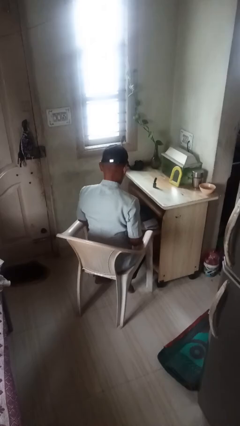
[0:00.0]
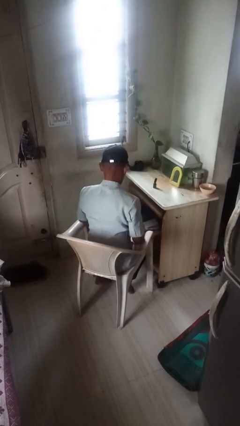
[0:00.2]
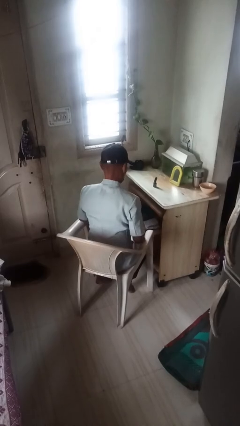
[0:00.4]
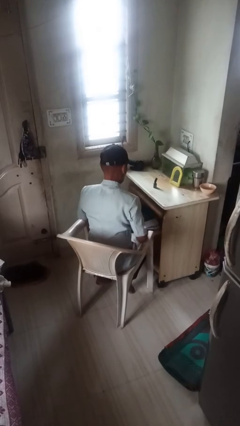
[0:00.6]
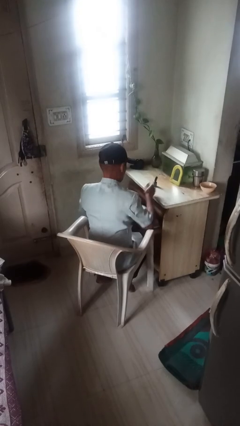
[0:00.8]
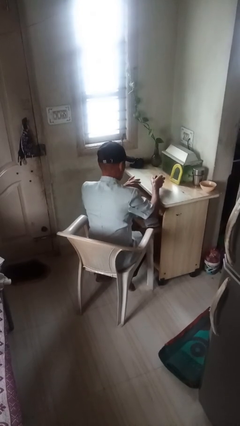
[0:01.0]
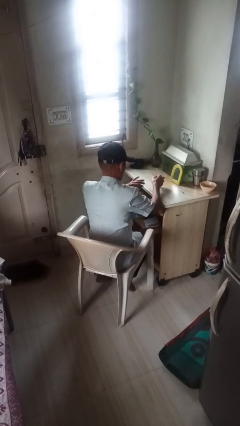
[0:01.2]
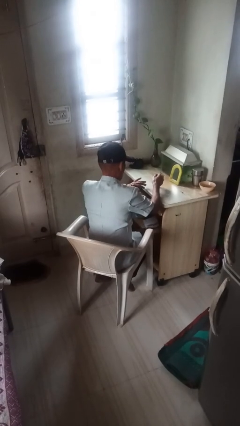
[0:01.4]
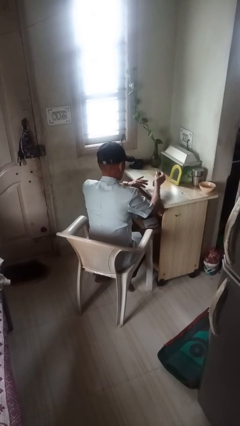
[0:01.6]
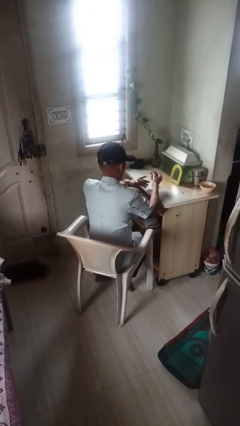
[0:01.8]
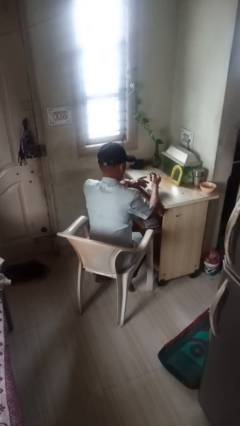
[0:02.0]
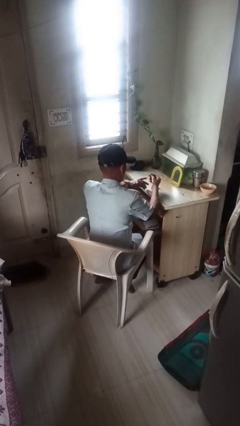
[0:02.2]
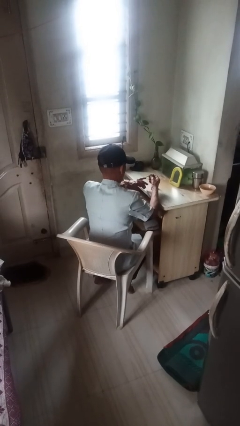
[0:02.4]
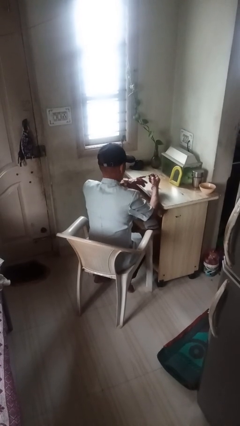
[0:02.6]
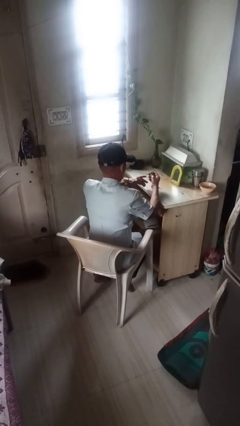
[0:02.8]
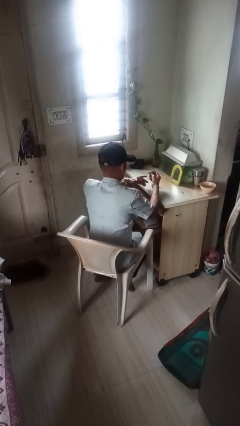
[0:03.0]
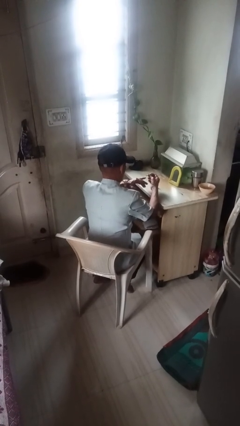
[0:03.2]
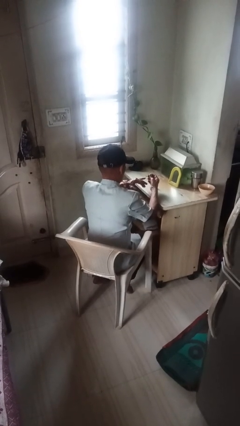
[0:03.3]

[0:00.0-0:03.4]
person paints fingernails

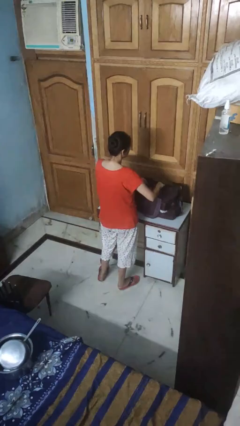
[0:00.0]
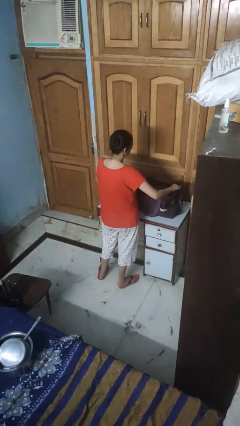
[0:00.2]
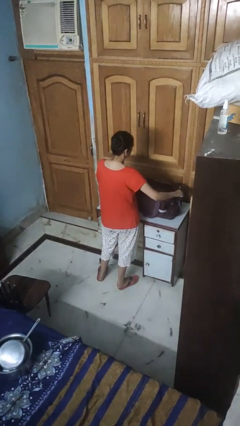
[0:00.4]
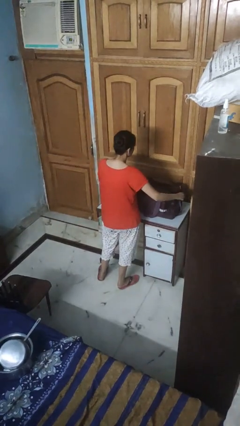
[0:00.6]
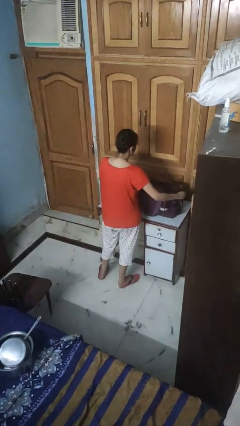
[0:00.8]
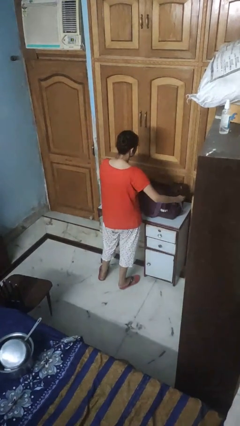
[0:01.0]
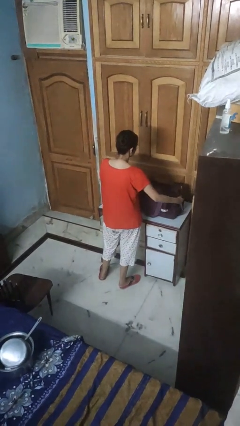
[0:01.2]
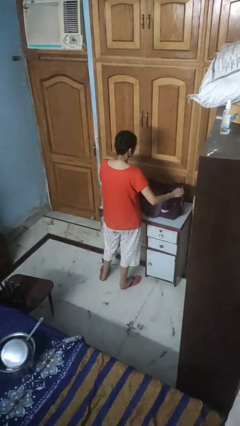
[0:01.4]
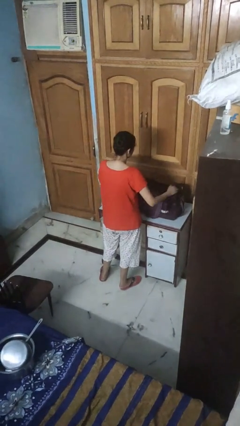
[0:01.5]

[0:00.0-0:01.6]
person opens suitcase

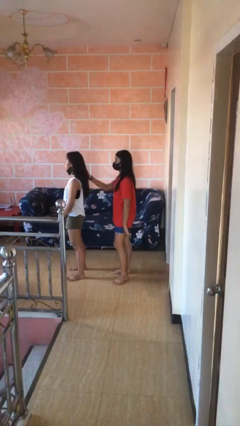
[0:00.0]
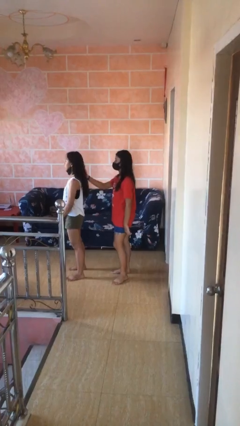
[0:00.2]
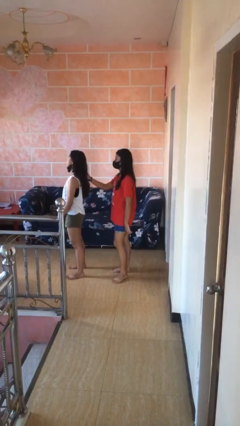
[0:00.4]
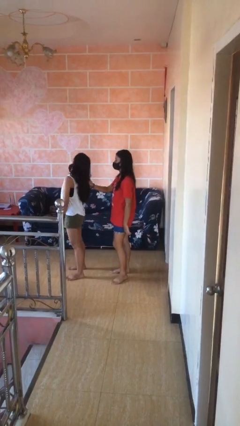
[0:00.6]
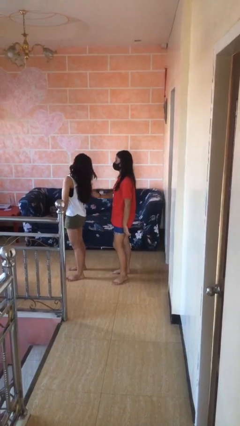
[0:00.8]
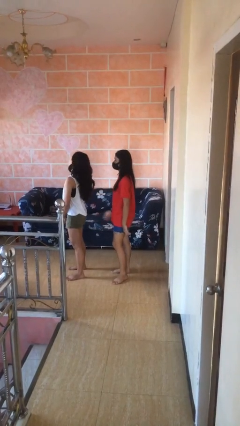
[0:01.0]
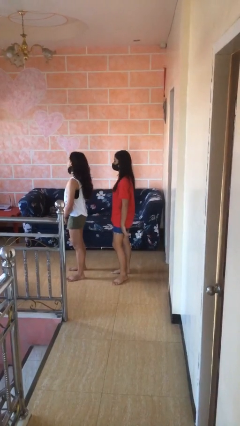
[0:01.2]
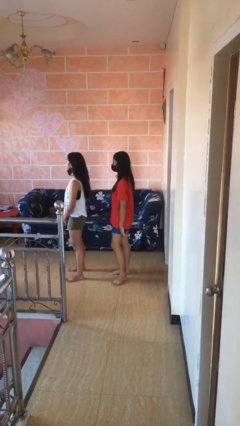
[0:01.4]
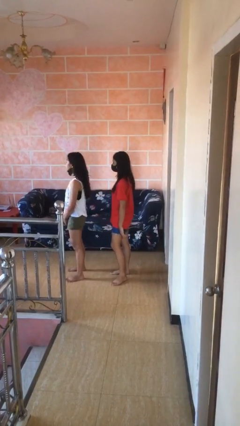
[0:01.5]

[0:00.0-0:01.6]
person grabs person by hair

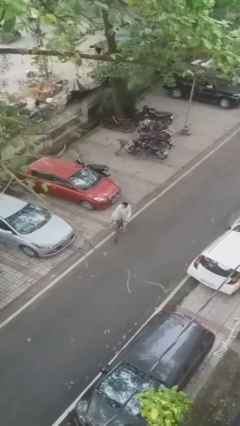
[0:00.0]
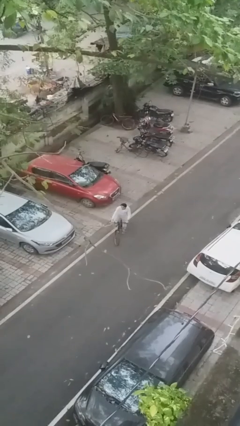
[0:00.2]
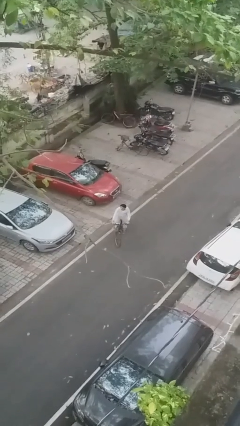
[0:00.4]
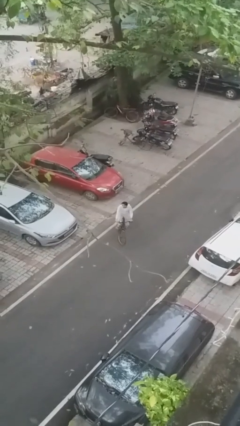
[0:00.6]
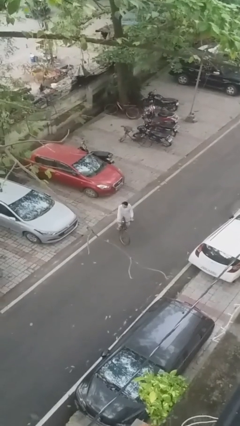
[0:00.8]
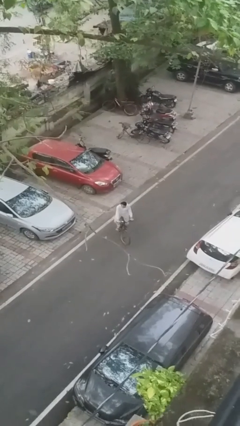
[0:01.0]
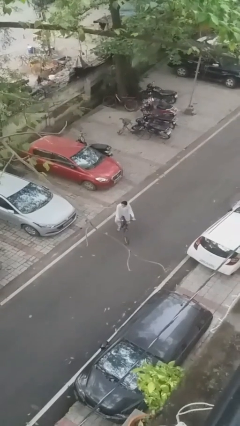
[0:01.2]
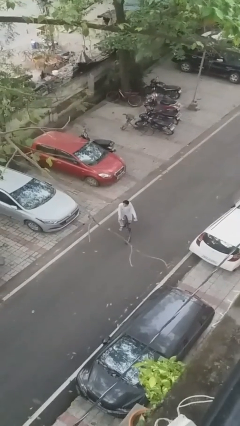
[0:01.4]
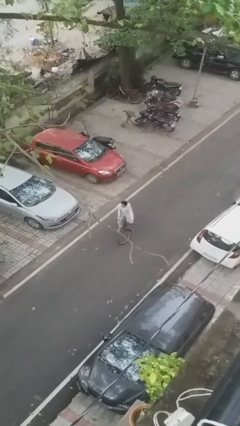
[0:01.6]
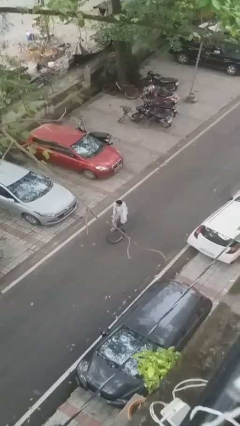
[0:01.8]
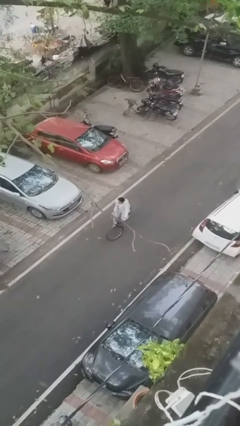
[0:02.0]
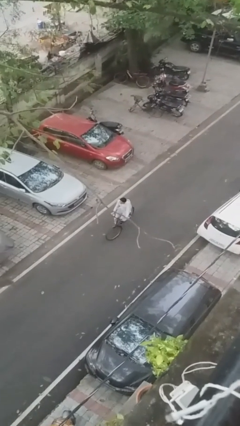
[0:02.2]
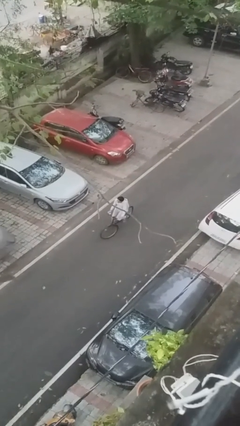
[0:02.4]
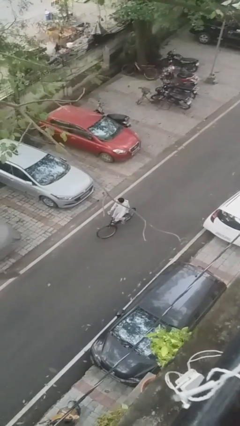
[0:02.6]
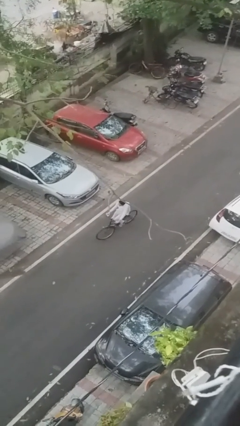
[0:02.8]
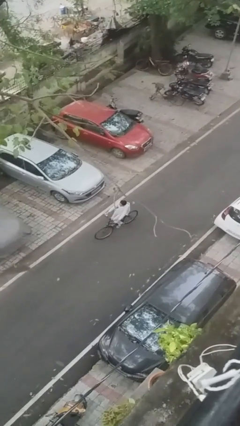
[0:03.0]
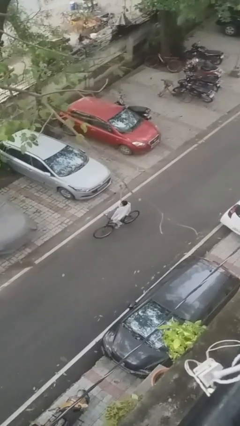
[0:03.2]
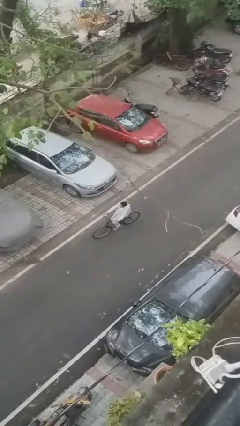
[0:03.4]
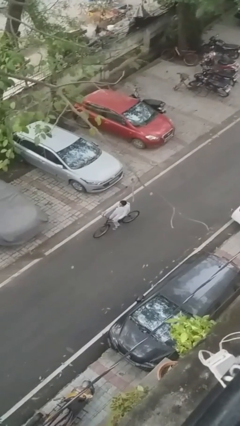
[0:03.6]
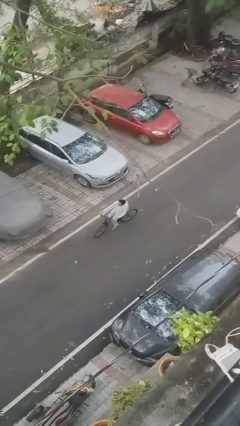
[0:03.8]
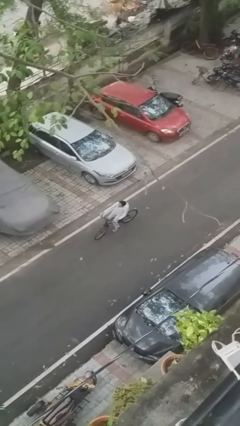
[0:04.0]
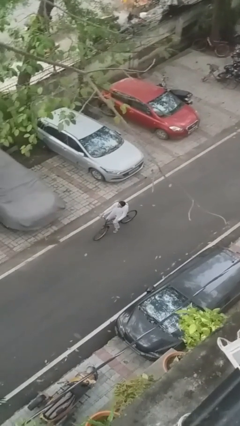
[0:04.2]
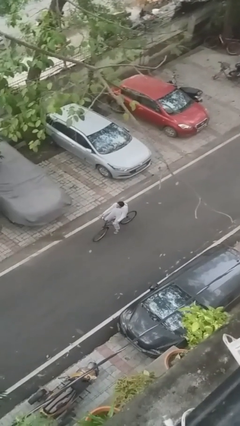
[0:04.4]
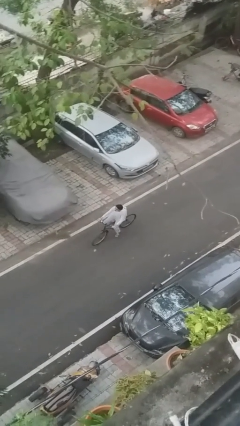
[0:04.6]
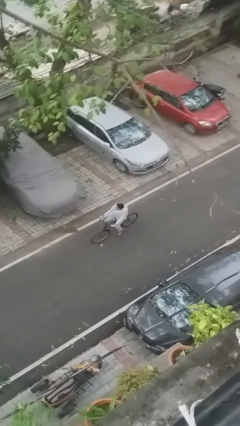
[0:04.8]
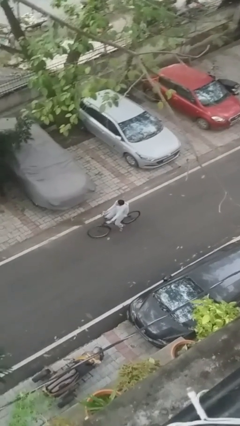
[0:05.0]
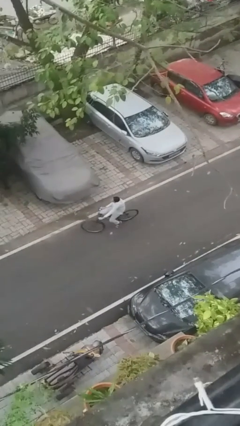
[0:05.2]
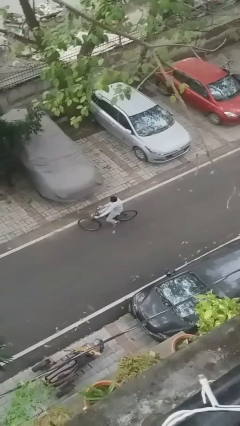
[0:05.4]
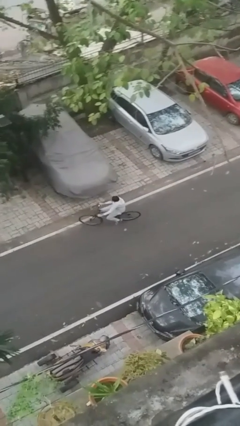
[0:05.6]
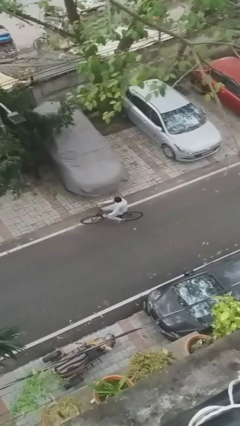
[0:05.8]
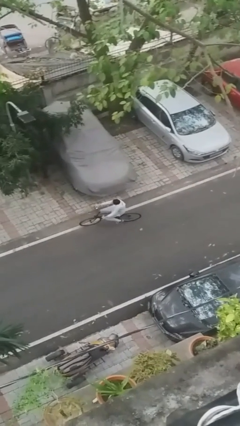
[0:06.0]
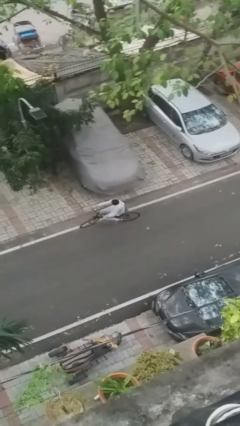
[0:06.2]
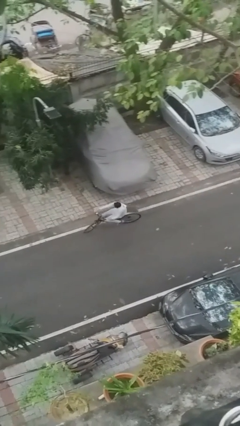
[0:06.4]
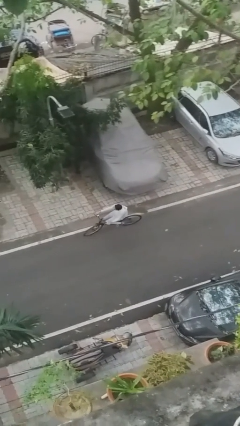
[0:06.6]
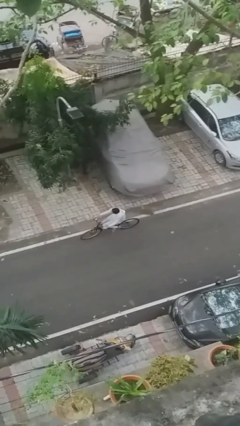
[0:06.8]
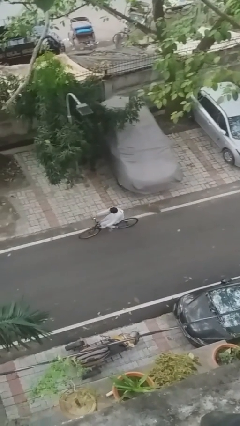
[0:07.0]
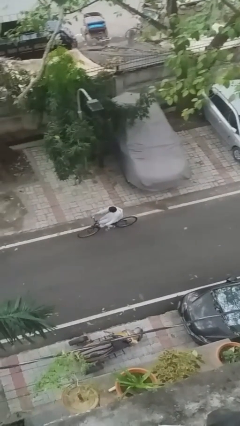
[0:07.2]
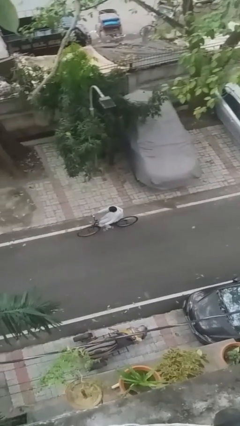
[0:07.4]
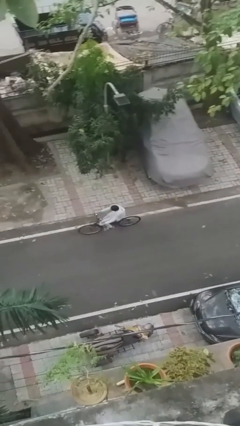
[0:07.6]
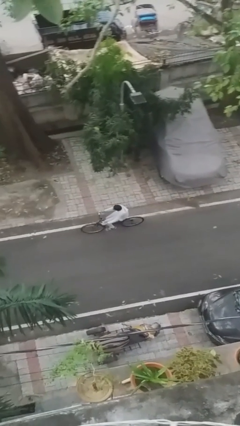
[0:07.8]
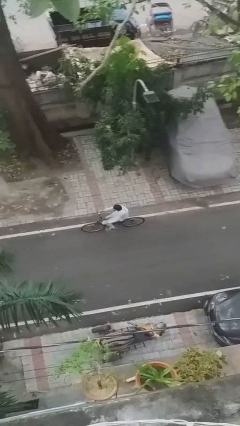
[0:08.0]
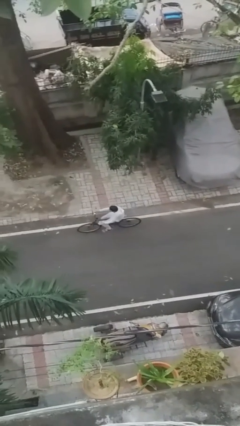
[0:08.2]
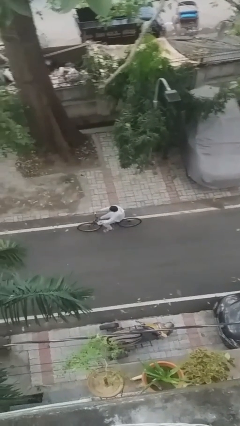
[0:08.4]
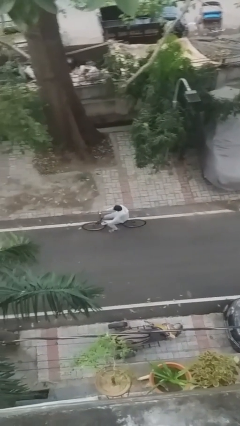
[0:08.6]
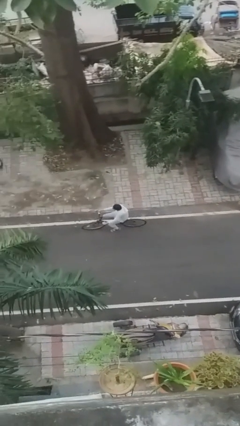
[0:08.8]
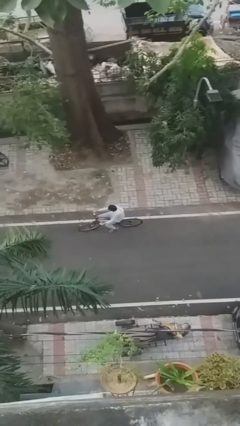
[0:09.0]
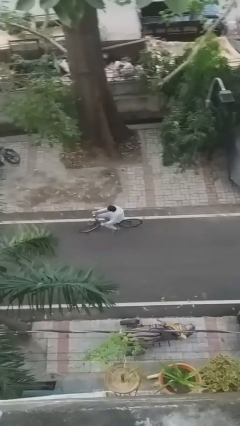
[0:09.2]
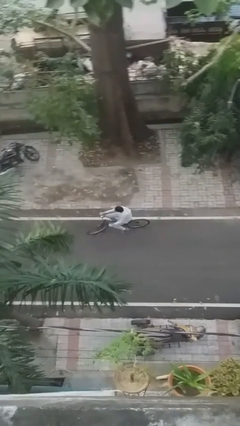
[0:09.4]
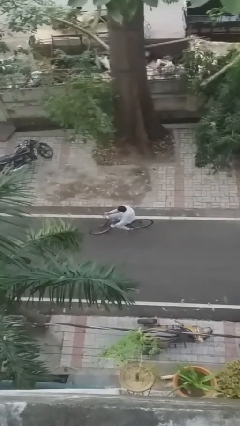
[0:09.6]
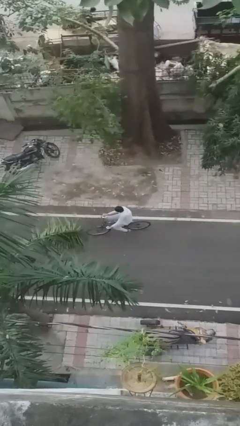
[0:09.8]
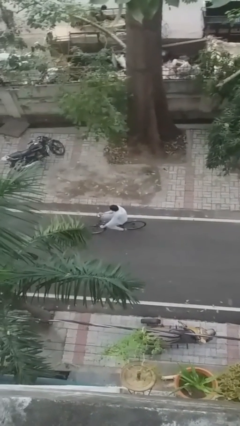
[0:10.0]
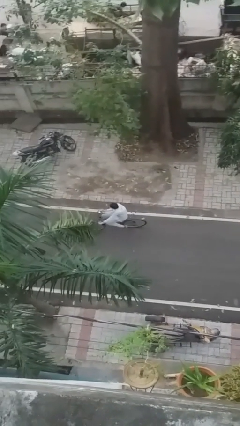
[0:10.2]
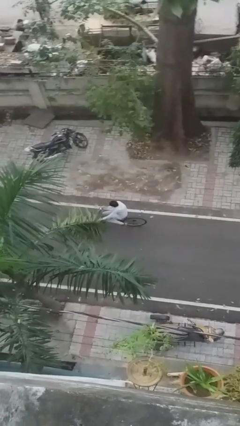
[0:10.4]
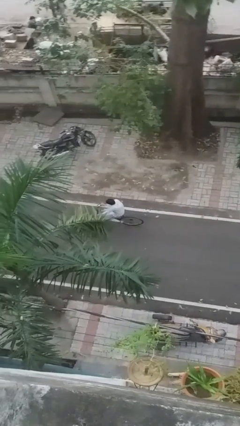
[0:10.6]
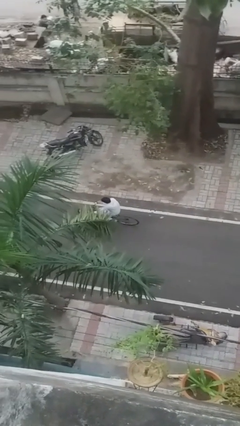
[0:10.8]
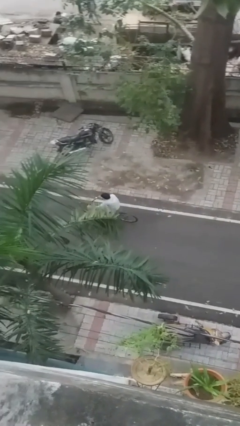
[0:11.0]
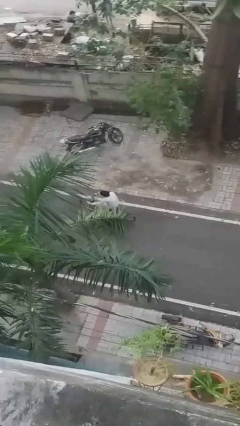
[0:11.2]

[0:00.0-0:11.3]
person rides bicycle
